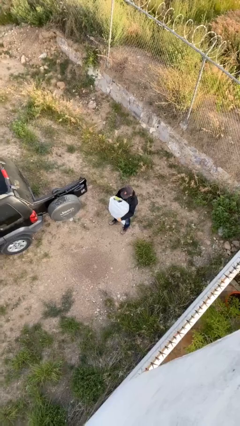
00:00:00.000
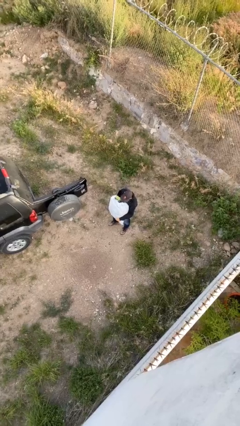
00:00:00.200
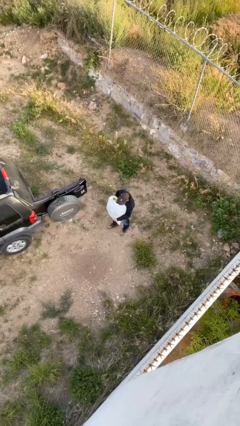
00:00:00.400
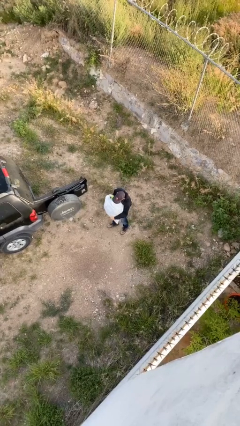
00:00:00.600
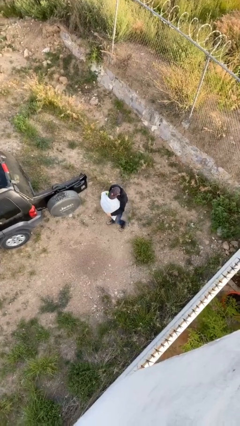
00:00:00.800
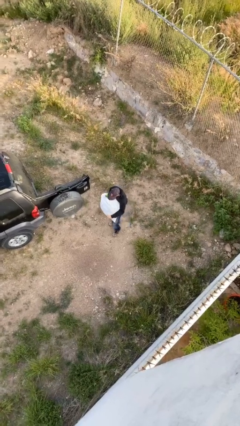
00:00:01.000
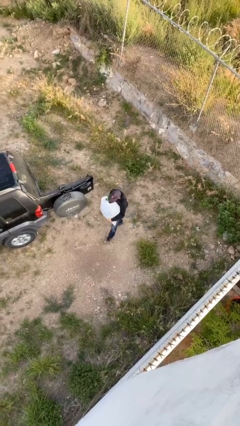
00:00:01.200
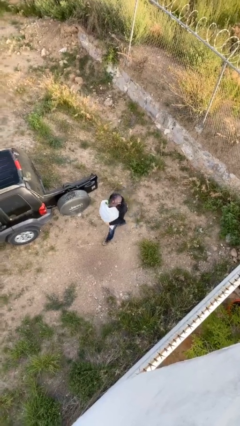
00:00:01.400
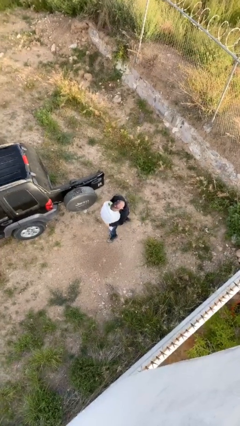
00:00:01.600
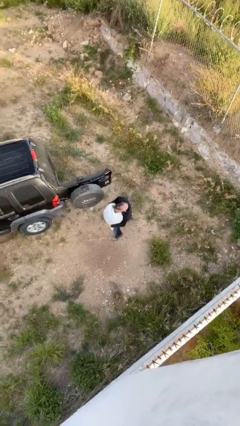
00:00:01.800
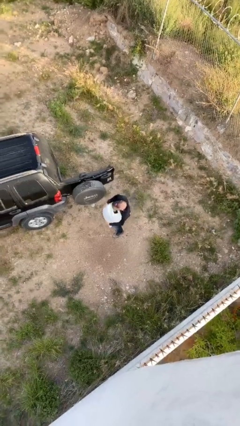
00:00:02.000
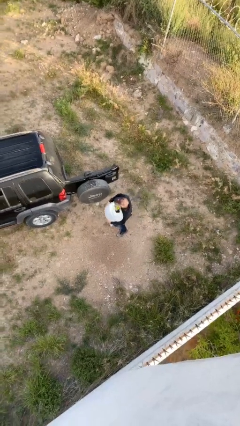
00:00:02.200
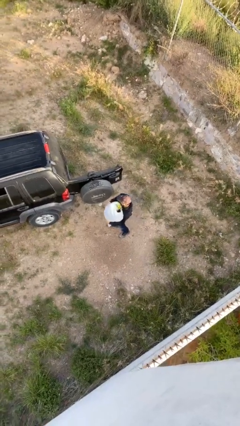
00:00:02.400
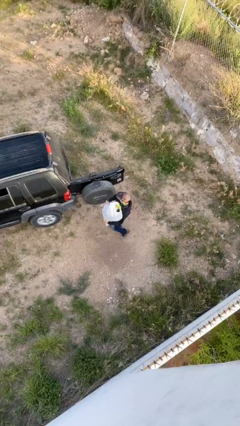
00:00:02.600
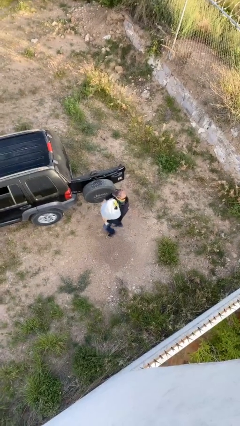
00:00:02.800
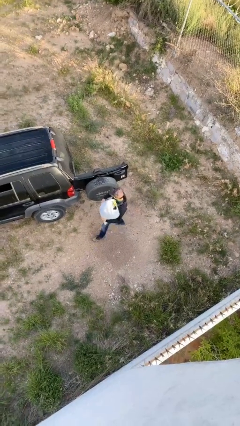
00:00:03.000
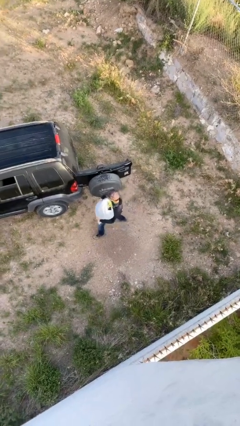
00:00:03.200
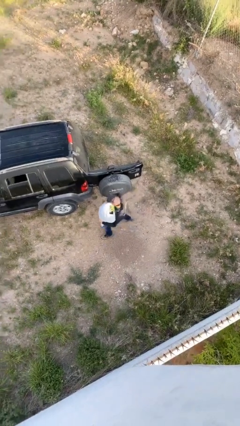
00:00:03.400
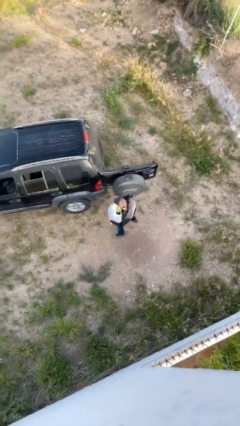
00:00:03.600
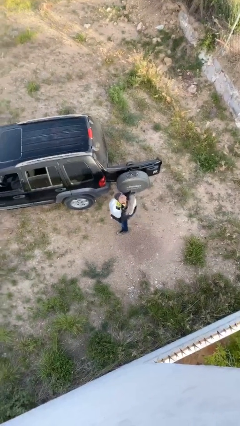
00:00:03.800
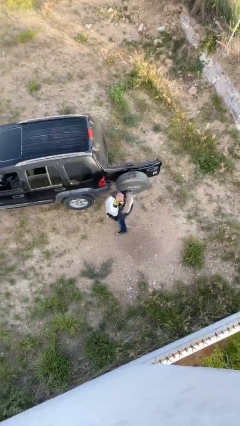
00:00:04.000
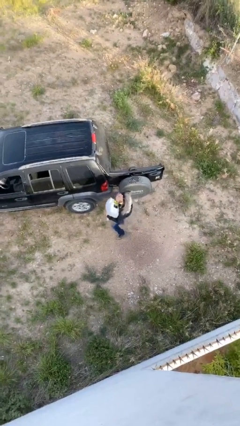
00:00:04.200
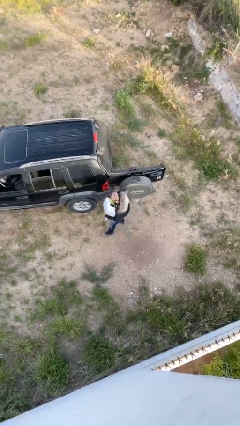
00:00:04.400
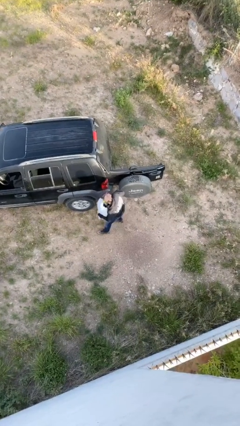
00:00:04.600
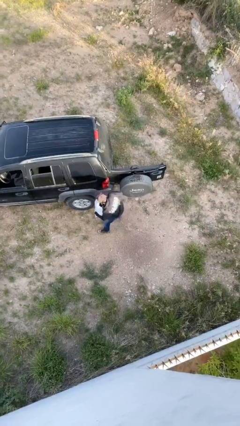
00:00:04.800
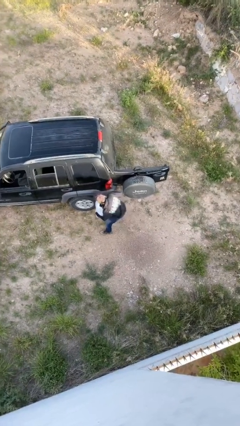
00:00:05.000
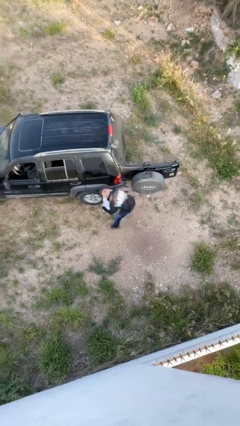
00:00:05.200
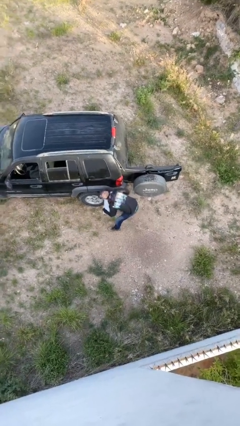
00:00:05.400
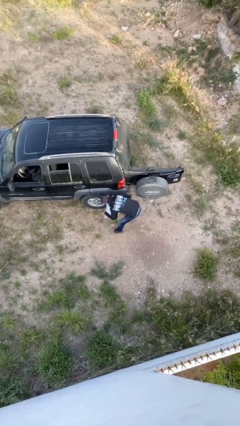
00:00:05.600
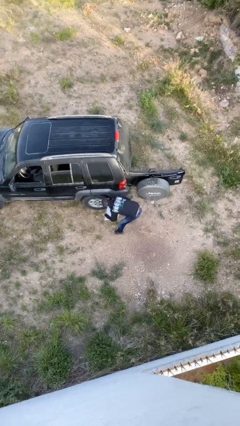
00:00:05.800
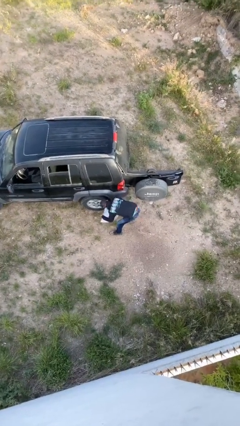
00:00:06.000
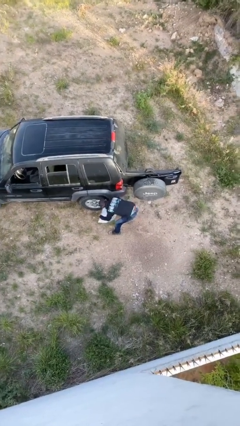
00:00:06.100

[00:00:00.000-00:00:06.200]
person carries heavy object

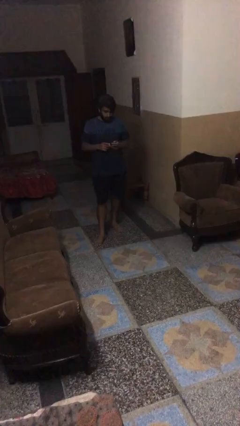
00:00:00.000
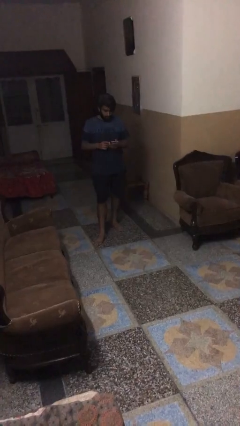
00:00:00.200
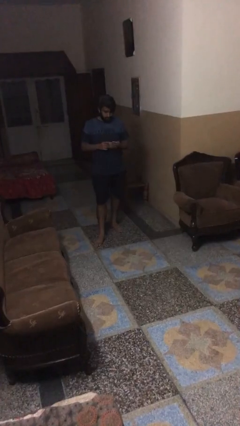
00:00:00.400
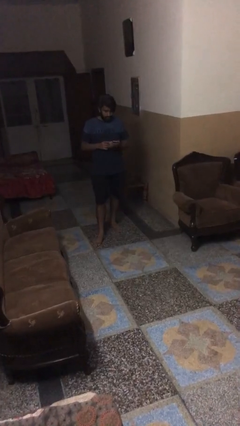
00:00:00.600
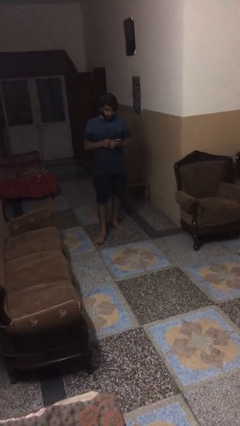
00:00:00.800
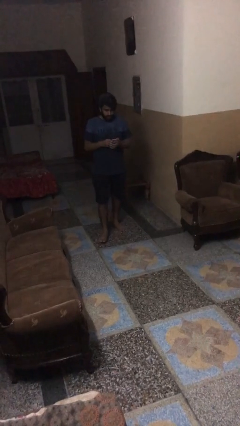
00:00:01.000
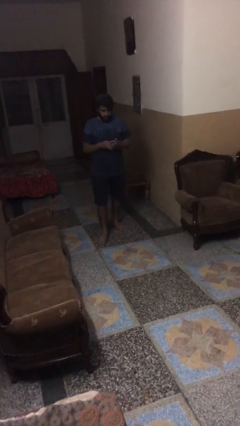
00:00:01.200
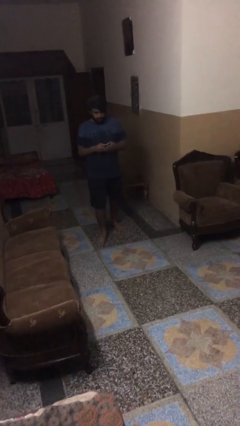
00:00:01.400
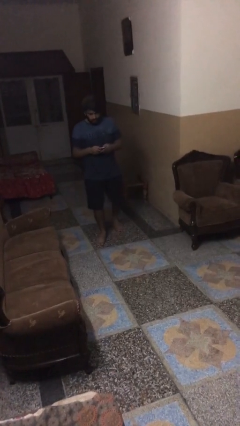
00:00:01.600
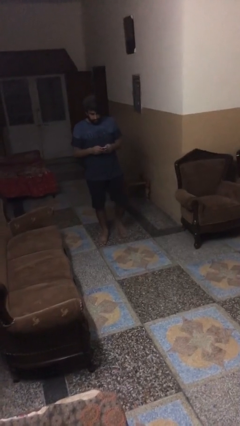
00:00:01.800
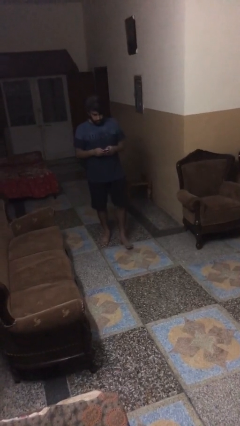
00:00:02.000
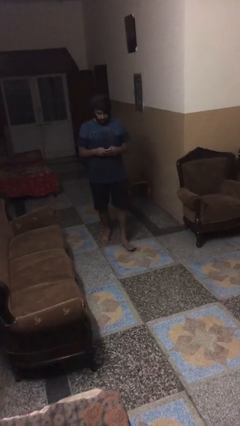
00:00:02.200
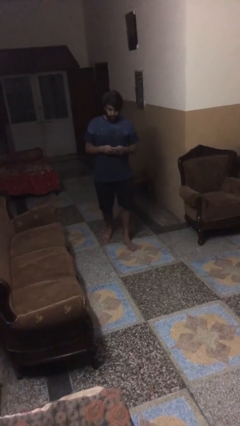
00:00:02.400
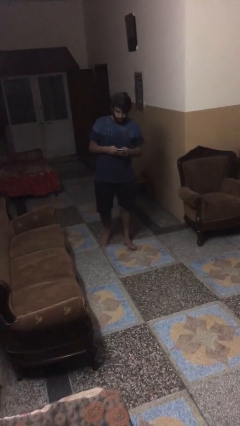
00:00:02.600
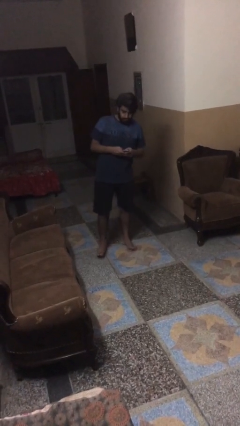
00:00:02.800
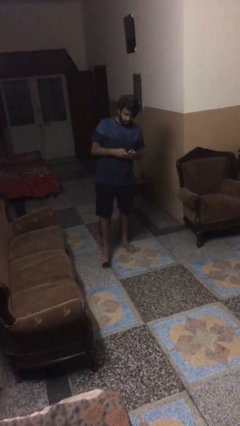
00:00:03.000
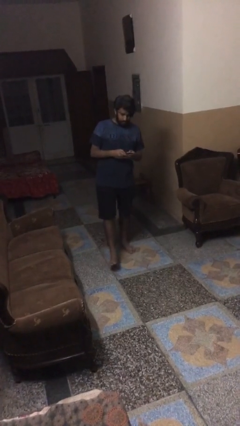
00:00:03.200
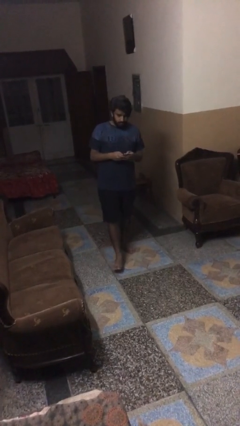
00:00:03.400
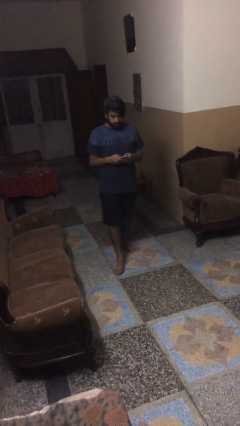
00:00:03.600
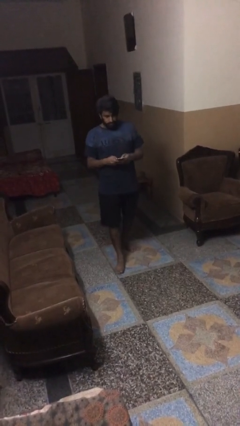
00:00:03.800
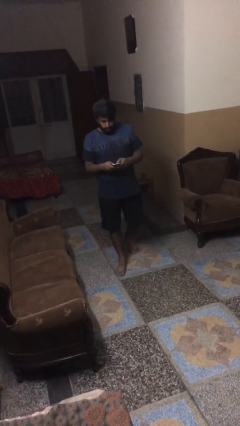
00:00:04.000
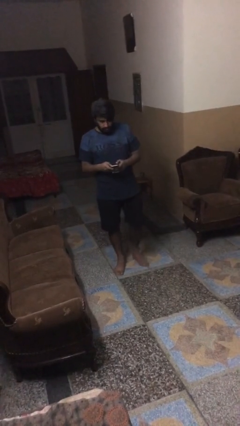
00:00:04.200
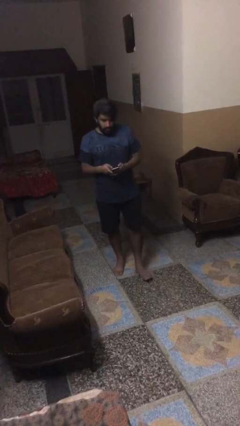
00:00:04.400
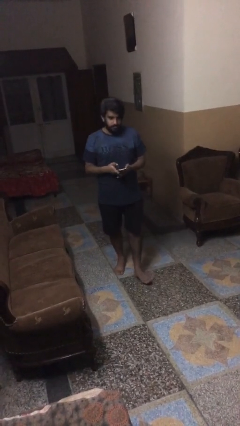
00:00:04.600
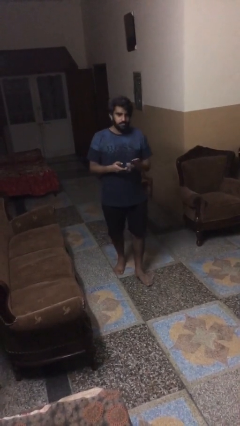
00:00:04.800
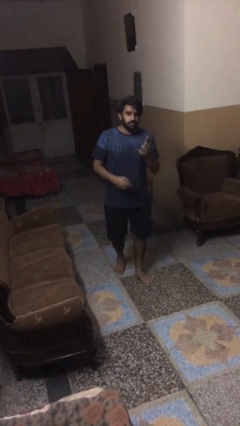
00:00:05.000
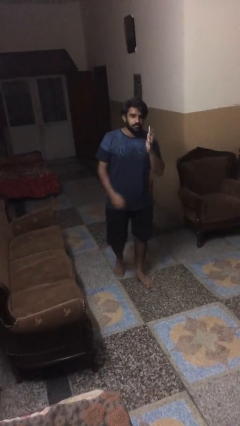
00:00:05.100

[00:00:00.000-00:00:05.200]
person texts on phone

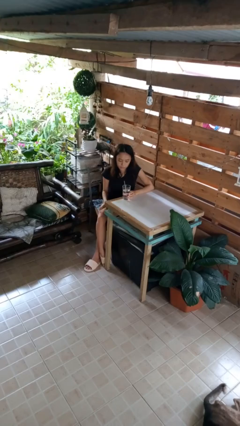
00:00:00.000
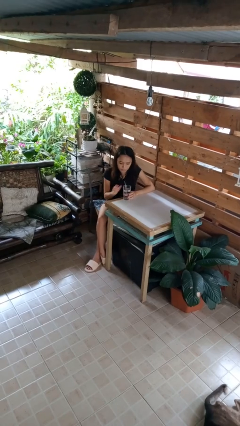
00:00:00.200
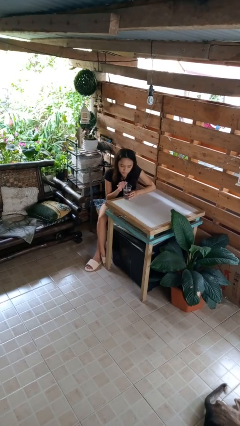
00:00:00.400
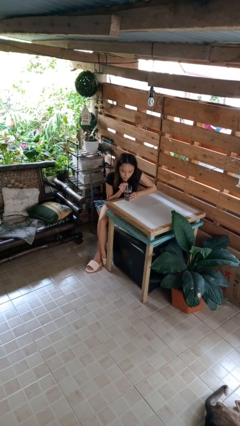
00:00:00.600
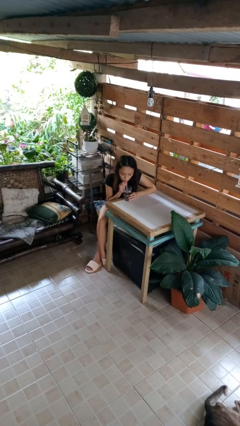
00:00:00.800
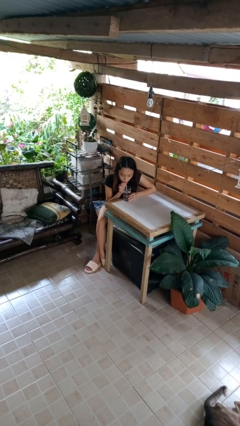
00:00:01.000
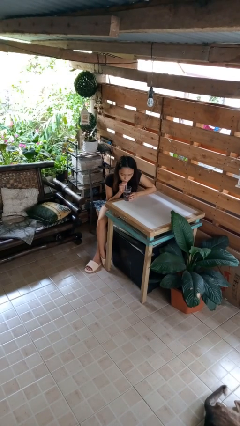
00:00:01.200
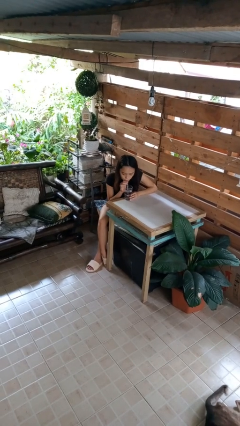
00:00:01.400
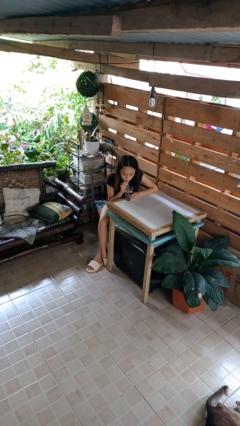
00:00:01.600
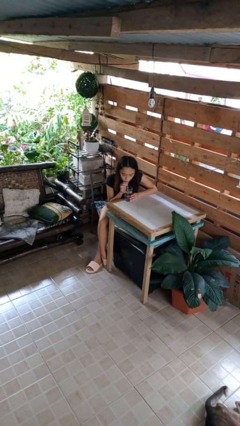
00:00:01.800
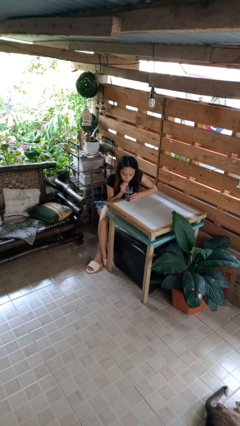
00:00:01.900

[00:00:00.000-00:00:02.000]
person drinks from straw

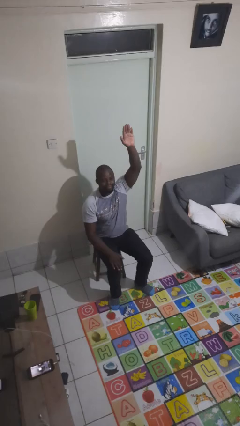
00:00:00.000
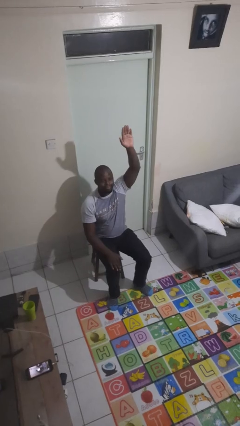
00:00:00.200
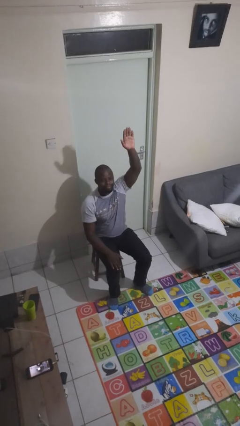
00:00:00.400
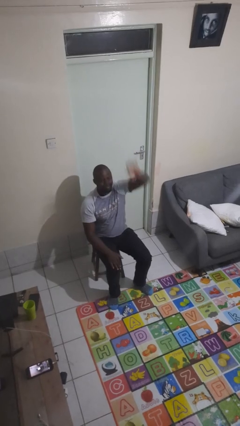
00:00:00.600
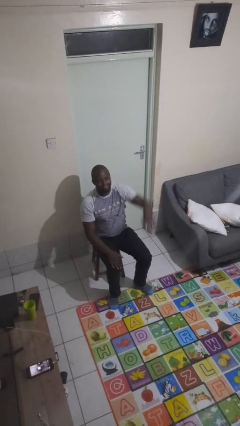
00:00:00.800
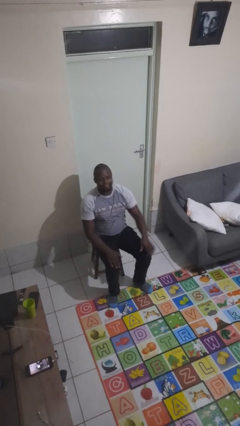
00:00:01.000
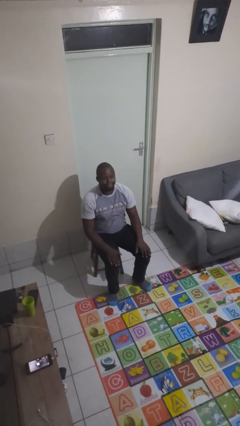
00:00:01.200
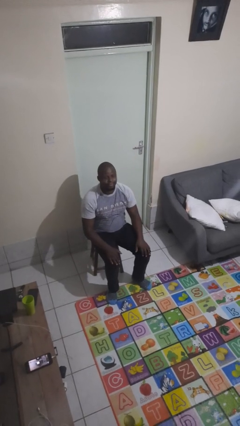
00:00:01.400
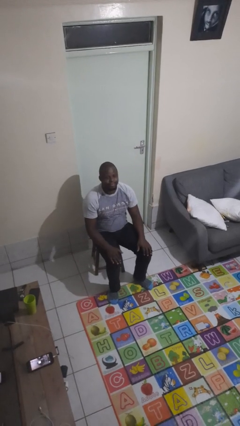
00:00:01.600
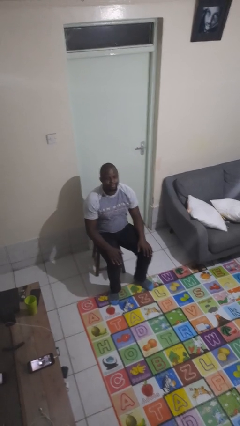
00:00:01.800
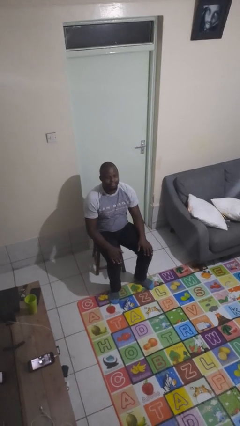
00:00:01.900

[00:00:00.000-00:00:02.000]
person gestures lower hand

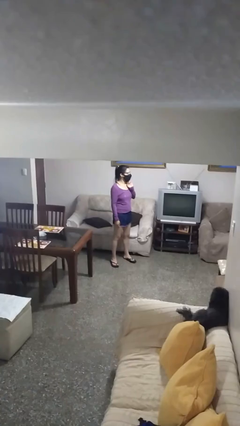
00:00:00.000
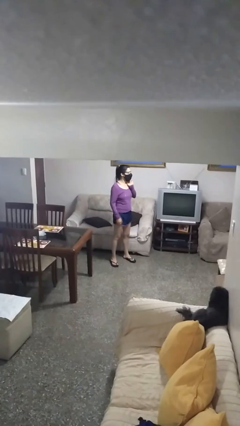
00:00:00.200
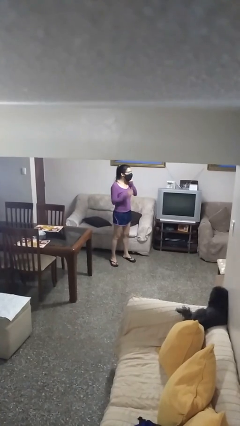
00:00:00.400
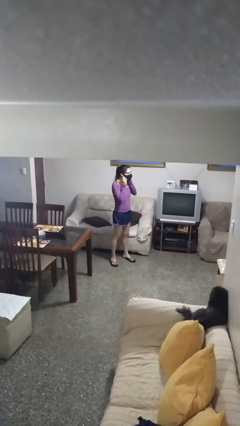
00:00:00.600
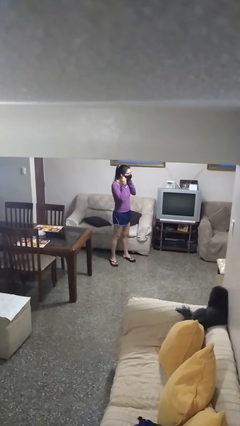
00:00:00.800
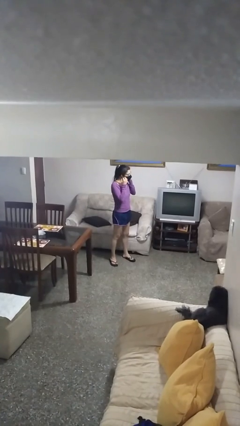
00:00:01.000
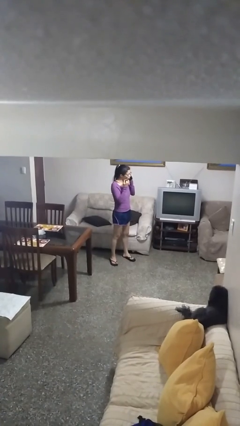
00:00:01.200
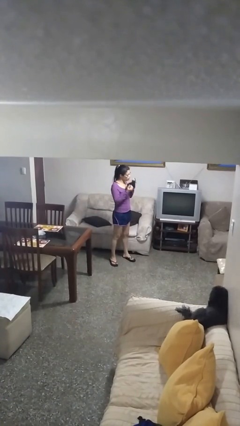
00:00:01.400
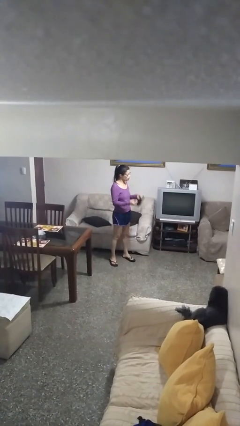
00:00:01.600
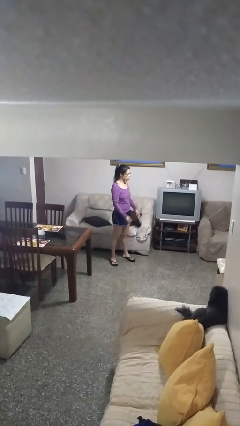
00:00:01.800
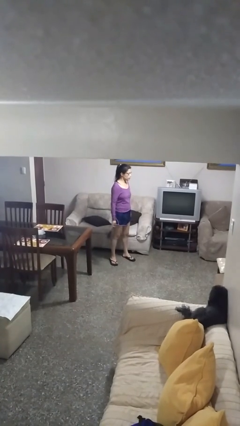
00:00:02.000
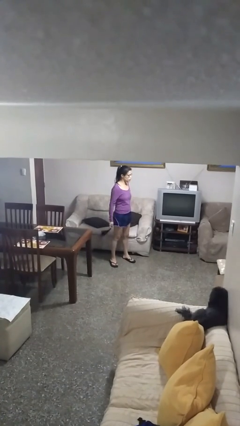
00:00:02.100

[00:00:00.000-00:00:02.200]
person takes off facemask
